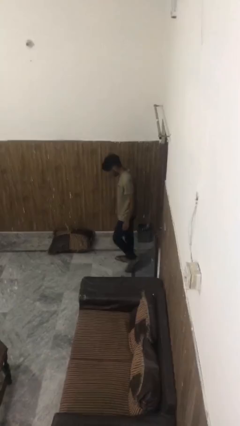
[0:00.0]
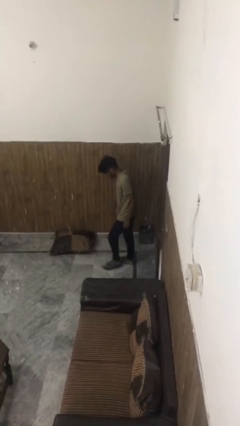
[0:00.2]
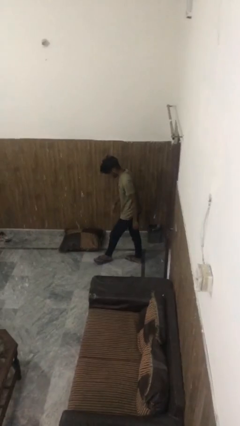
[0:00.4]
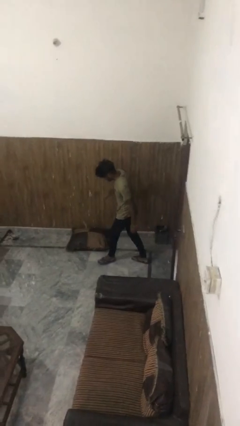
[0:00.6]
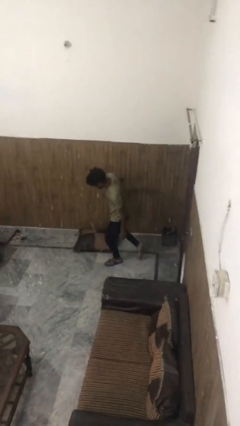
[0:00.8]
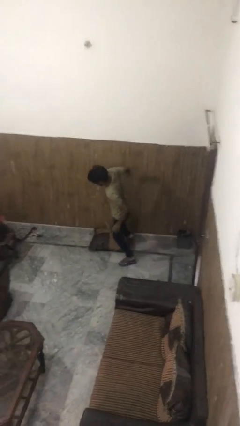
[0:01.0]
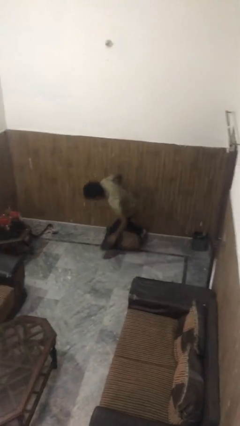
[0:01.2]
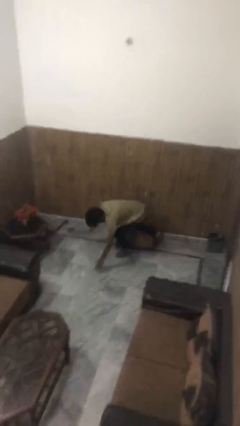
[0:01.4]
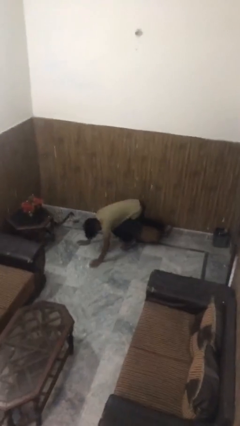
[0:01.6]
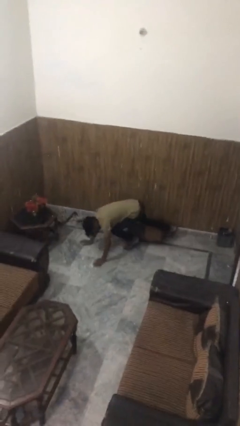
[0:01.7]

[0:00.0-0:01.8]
person trips on object on floor

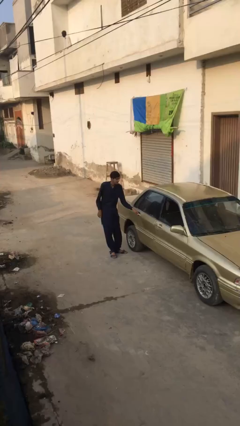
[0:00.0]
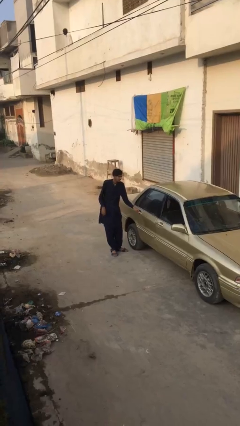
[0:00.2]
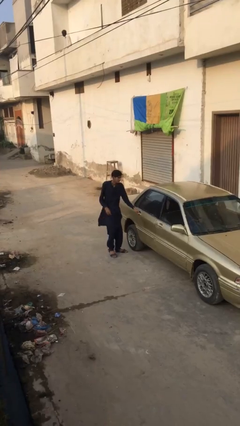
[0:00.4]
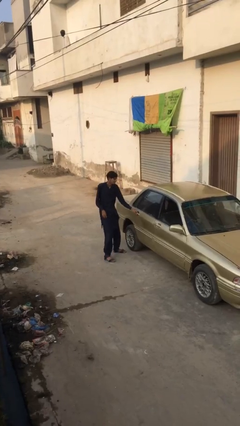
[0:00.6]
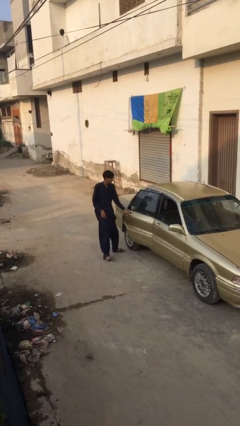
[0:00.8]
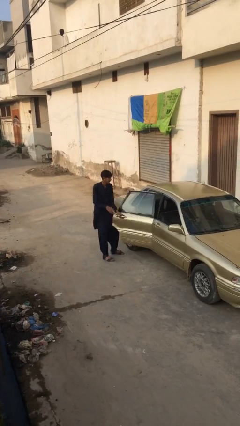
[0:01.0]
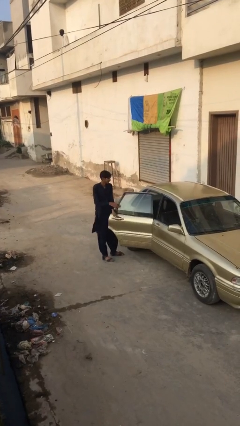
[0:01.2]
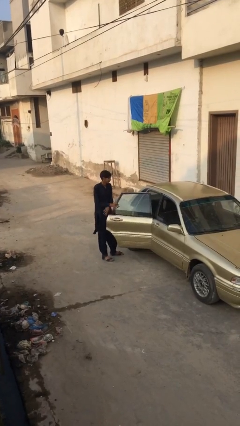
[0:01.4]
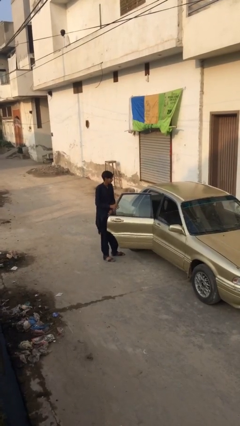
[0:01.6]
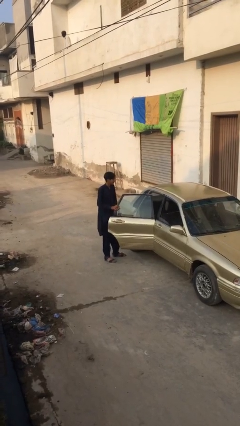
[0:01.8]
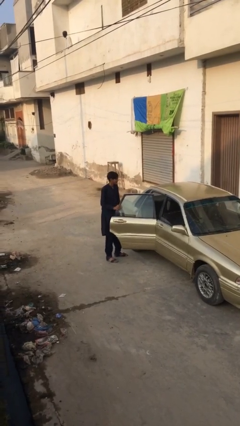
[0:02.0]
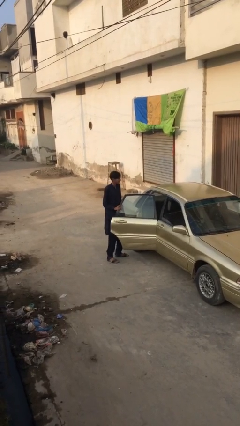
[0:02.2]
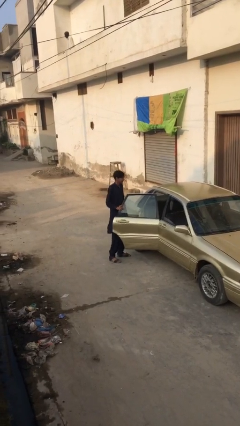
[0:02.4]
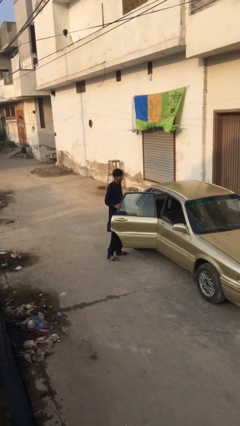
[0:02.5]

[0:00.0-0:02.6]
person opens car door

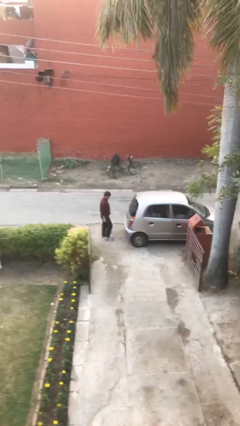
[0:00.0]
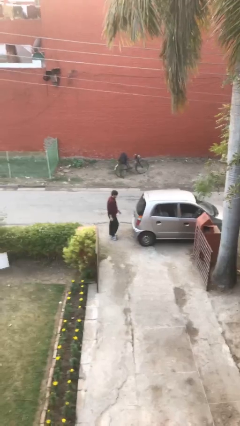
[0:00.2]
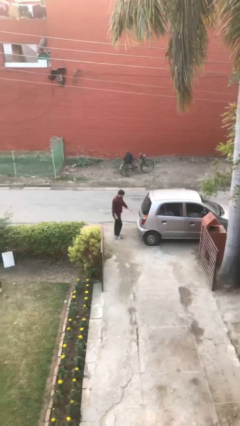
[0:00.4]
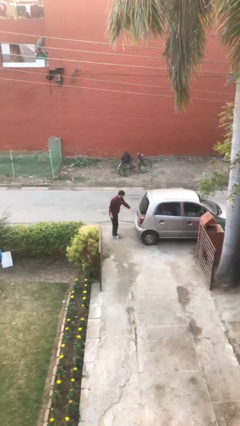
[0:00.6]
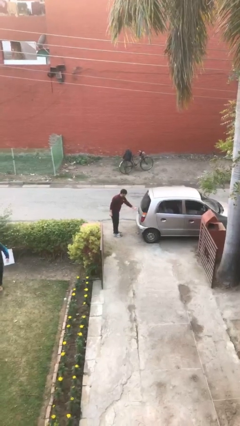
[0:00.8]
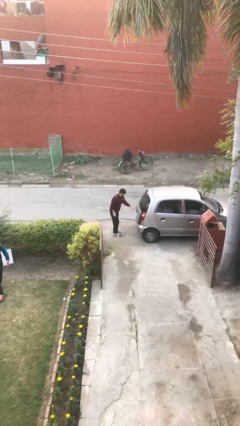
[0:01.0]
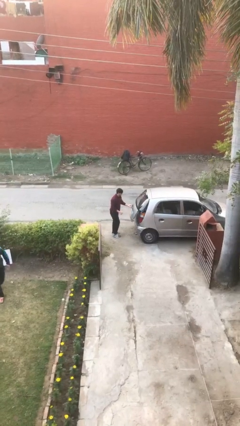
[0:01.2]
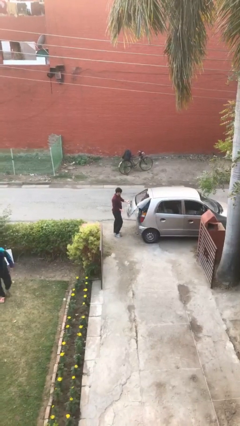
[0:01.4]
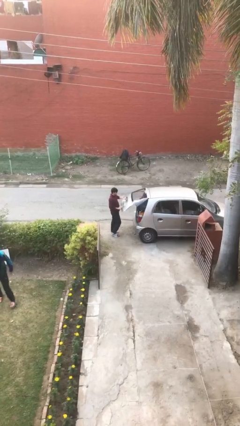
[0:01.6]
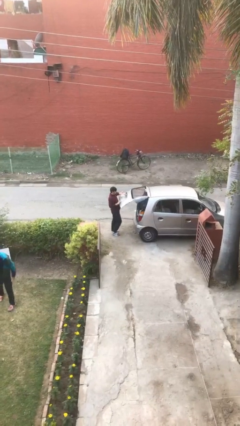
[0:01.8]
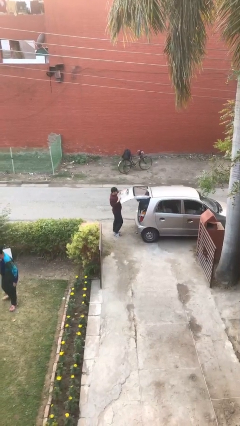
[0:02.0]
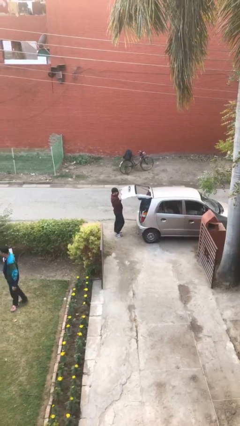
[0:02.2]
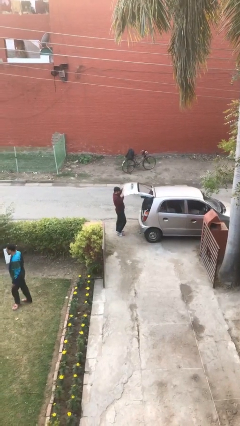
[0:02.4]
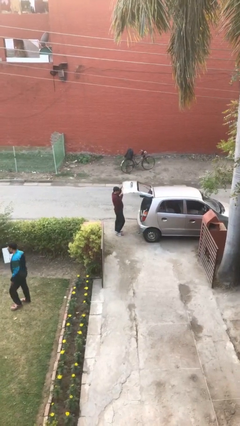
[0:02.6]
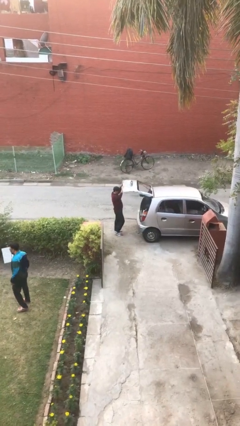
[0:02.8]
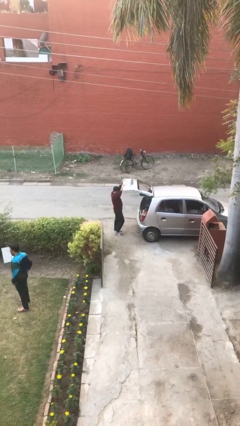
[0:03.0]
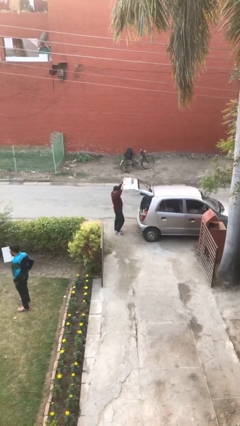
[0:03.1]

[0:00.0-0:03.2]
person opens car trunk

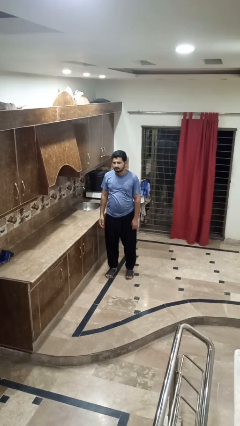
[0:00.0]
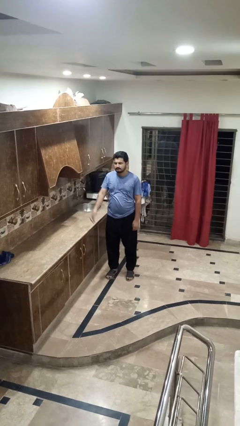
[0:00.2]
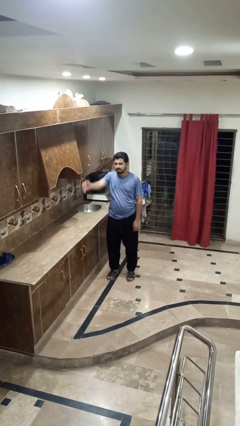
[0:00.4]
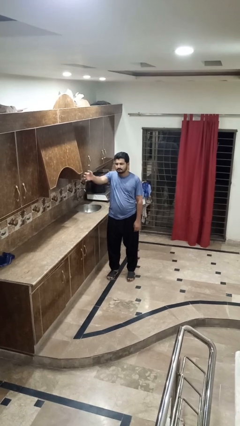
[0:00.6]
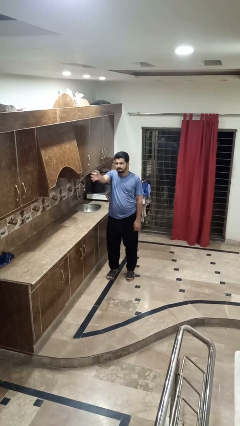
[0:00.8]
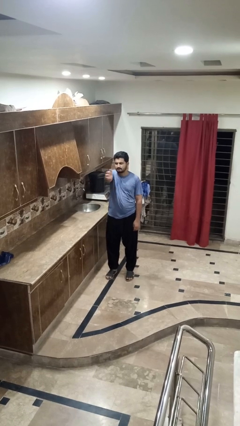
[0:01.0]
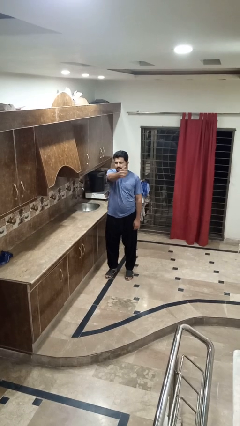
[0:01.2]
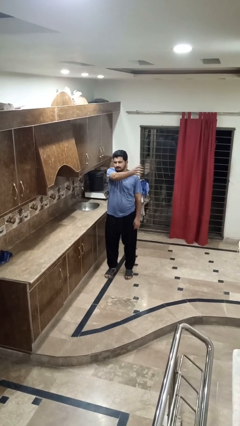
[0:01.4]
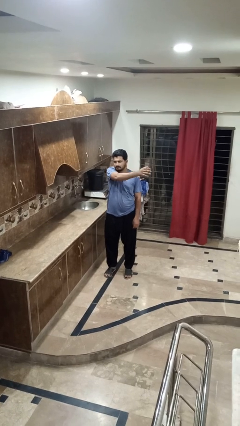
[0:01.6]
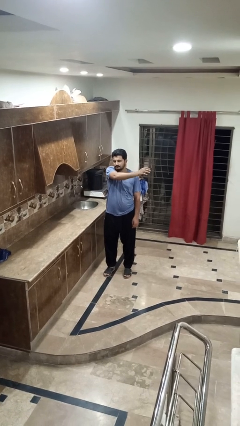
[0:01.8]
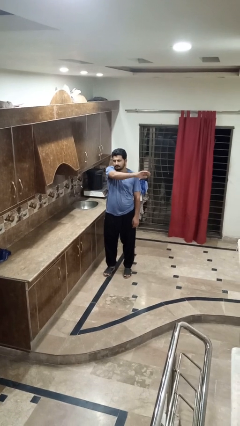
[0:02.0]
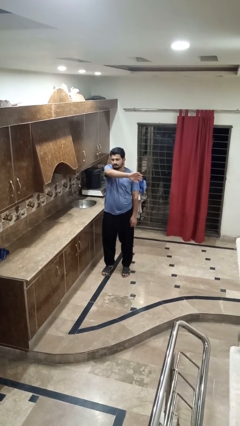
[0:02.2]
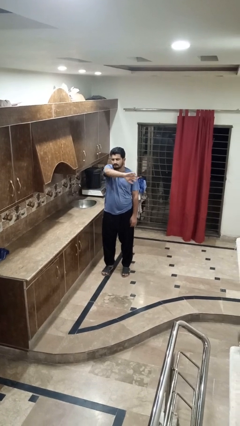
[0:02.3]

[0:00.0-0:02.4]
person gestures swipe left

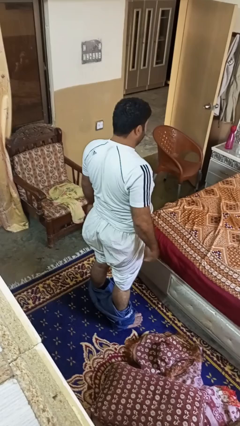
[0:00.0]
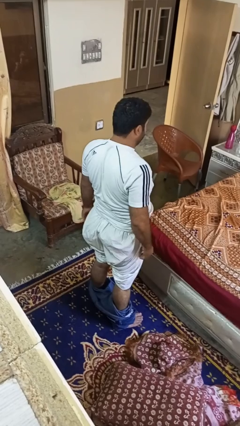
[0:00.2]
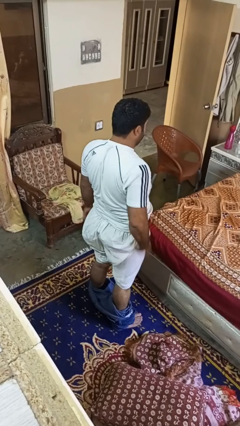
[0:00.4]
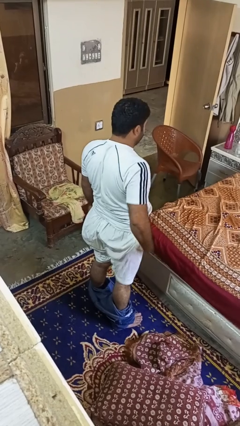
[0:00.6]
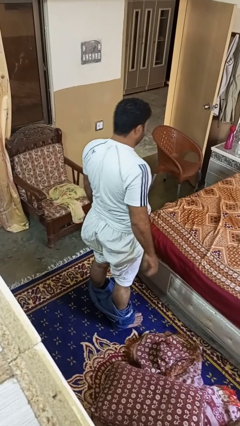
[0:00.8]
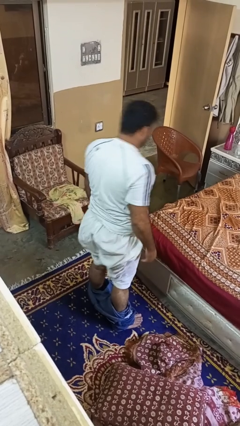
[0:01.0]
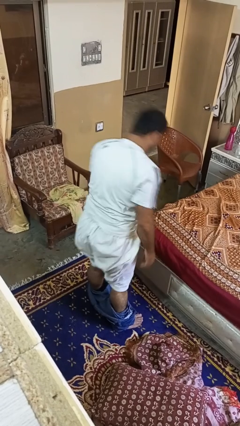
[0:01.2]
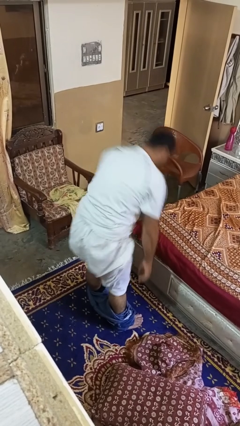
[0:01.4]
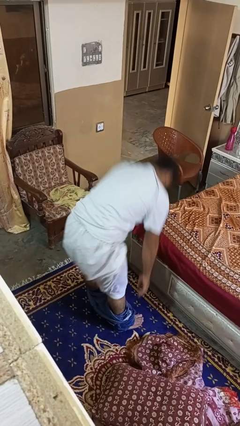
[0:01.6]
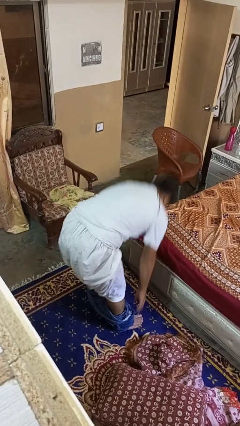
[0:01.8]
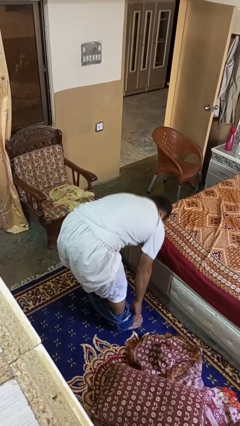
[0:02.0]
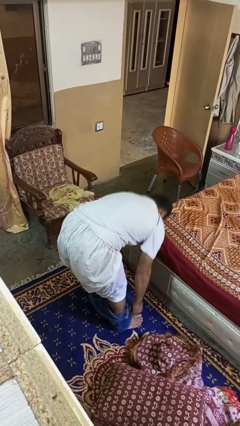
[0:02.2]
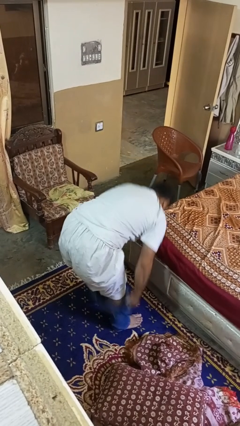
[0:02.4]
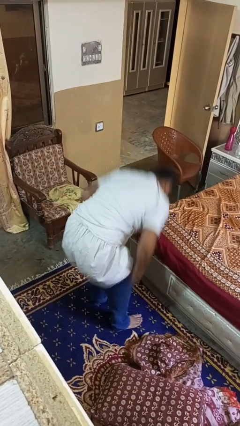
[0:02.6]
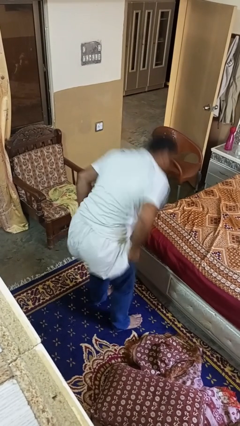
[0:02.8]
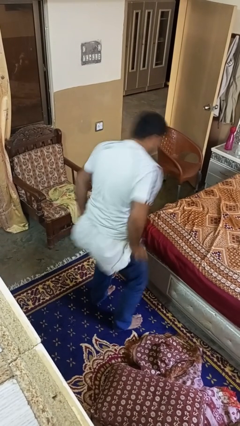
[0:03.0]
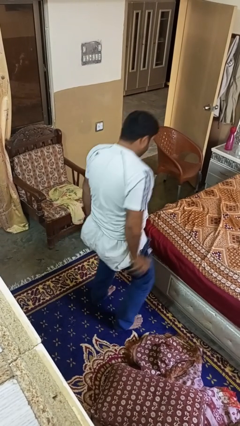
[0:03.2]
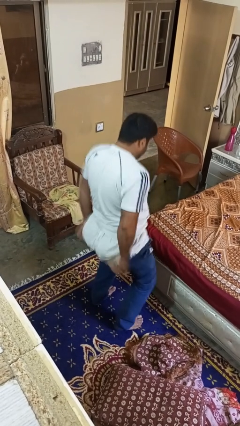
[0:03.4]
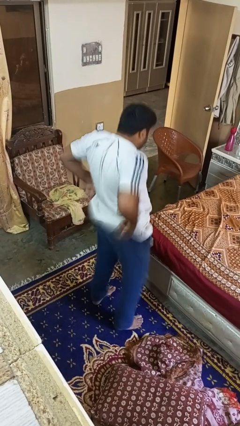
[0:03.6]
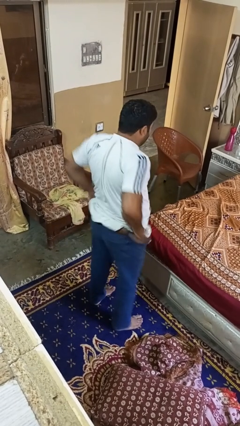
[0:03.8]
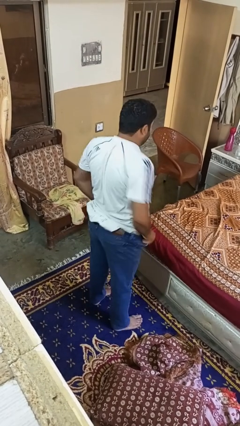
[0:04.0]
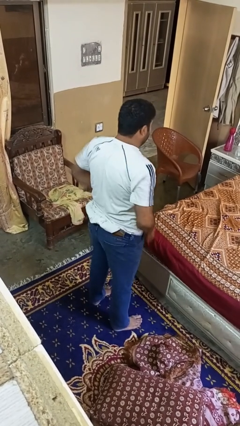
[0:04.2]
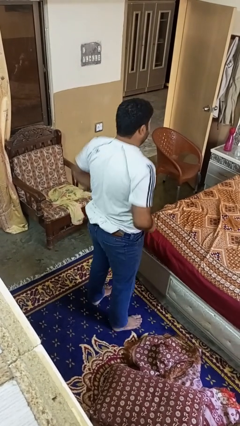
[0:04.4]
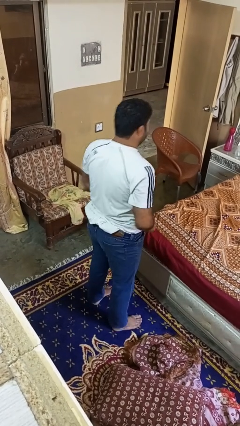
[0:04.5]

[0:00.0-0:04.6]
person puts on pants

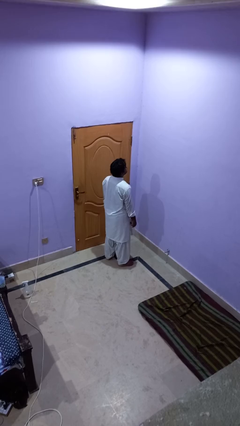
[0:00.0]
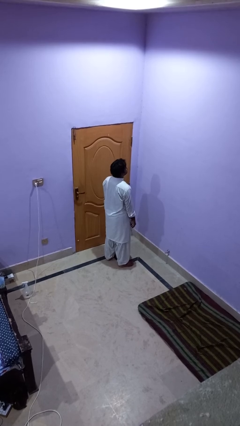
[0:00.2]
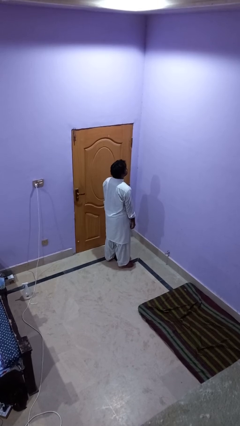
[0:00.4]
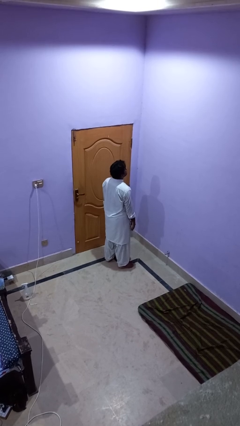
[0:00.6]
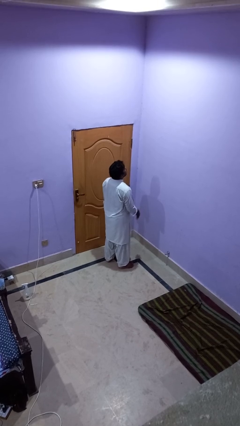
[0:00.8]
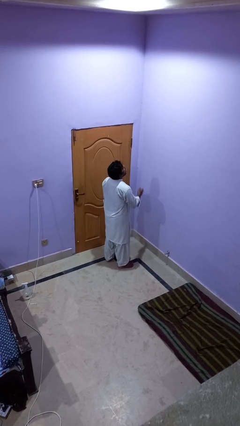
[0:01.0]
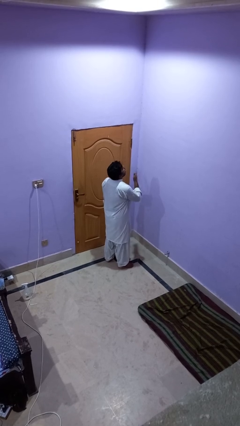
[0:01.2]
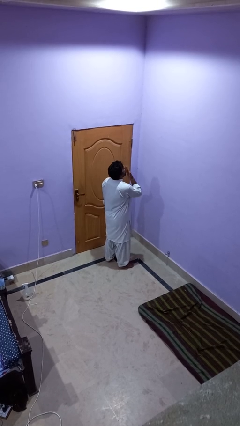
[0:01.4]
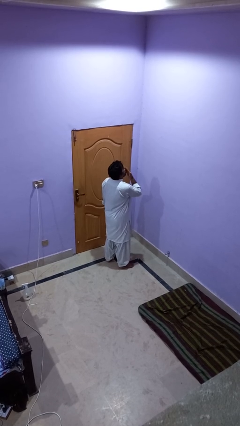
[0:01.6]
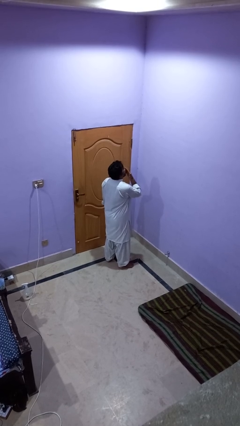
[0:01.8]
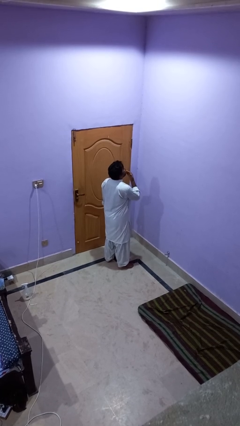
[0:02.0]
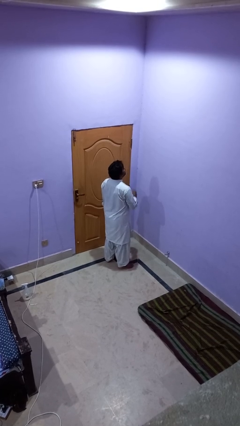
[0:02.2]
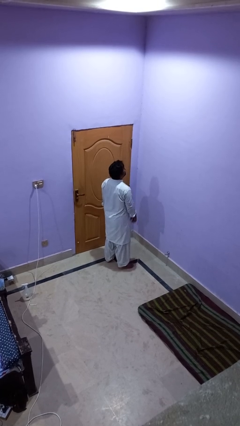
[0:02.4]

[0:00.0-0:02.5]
person yawns
